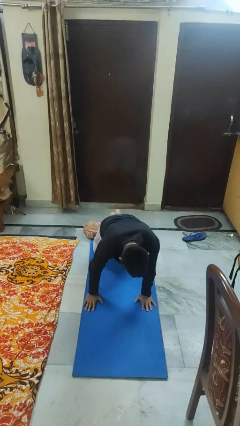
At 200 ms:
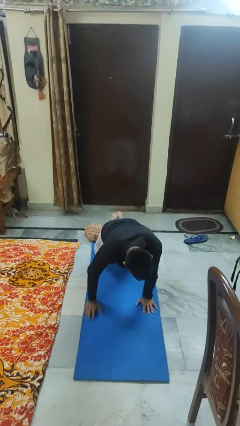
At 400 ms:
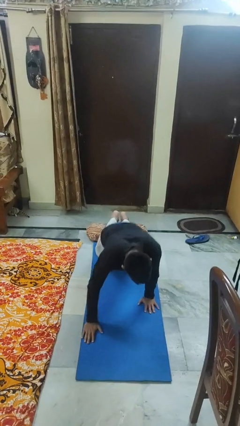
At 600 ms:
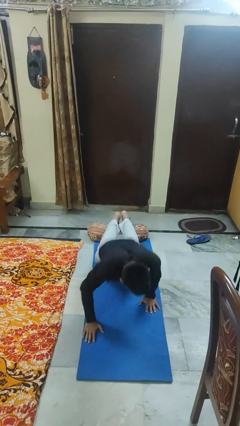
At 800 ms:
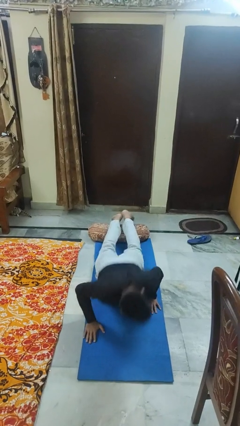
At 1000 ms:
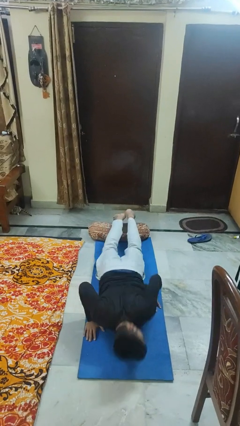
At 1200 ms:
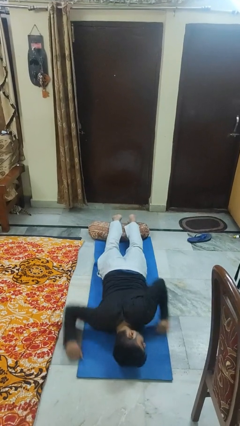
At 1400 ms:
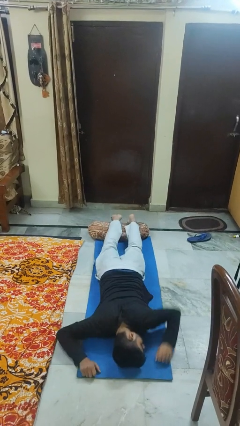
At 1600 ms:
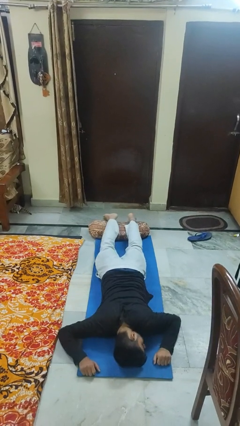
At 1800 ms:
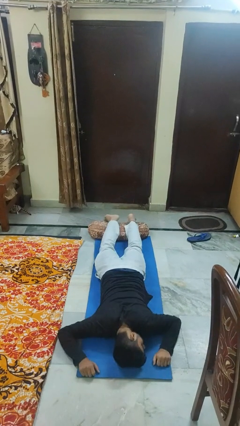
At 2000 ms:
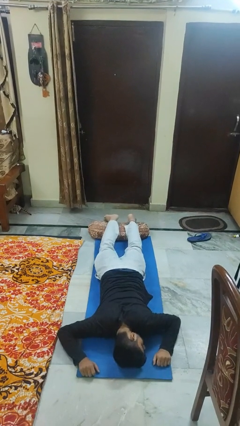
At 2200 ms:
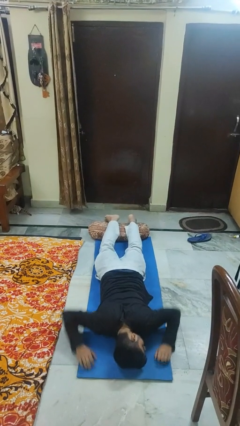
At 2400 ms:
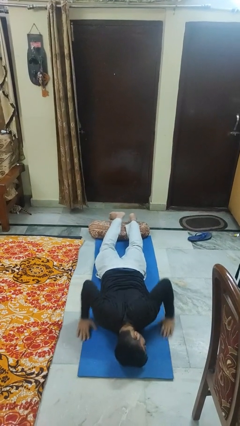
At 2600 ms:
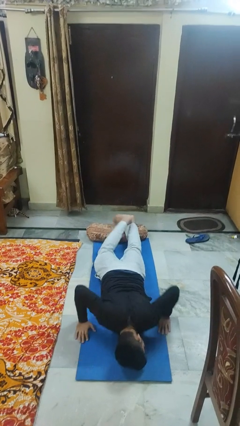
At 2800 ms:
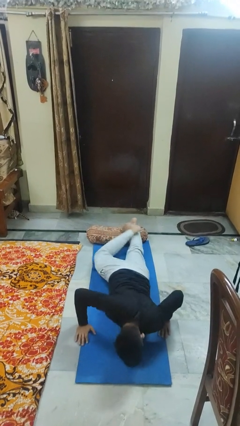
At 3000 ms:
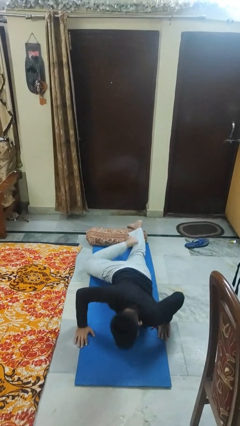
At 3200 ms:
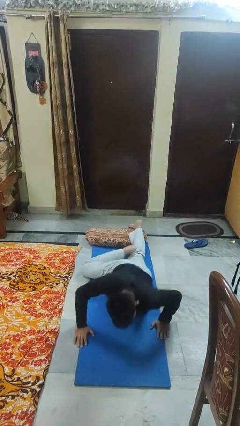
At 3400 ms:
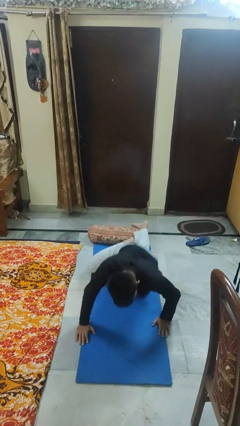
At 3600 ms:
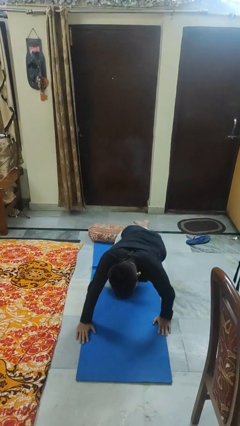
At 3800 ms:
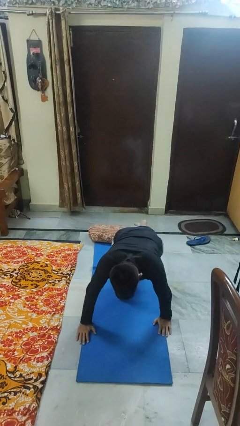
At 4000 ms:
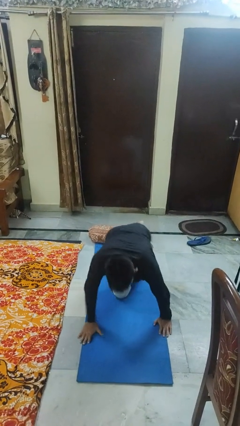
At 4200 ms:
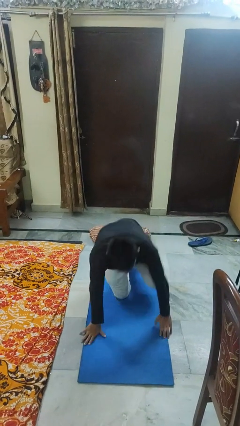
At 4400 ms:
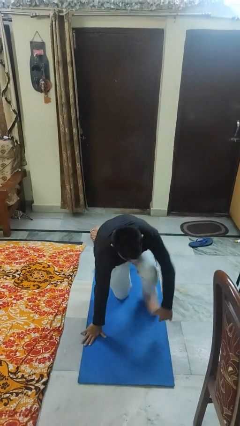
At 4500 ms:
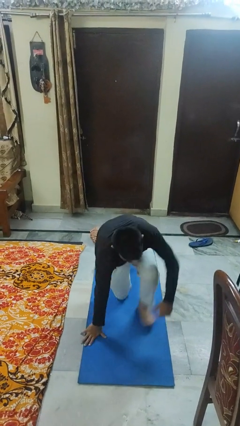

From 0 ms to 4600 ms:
person lies down on floor

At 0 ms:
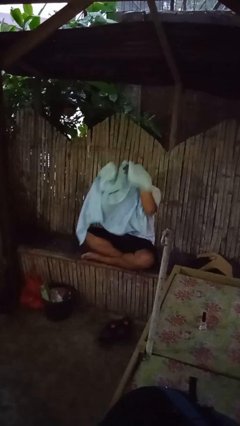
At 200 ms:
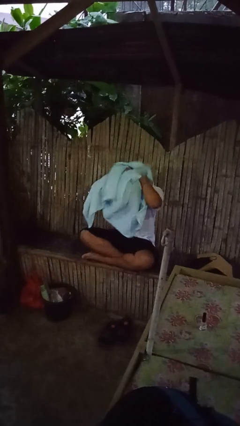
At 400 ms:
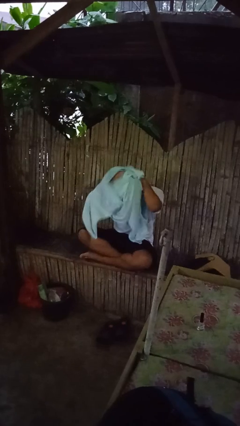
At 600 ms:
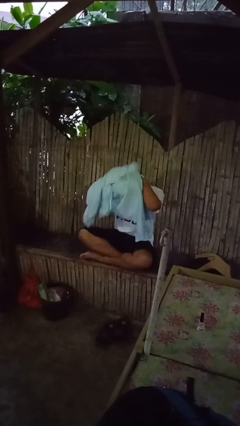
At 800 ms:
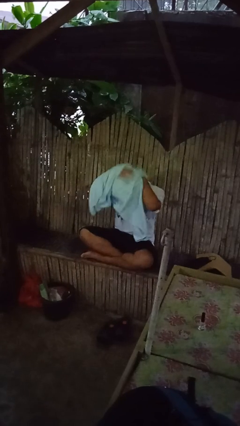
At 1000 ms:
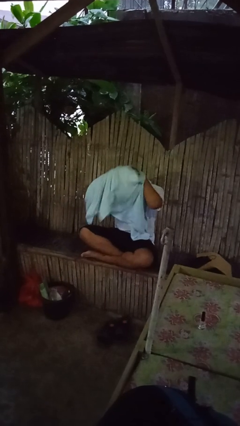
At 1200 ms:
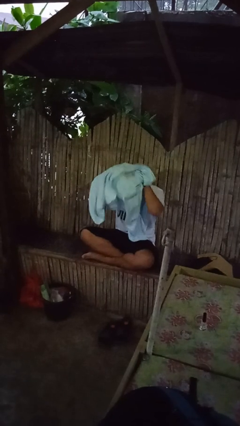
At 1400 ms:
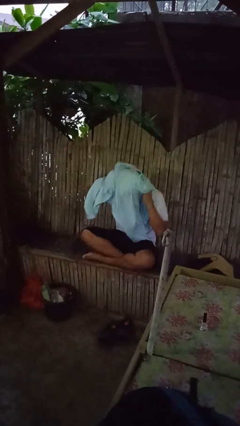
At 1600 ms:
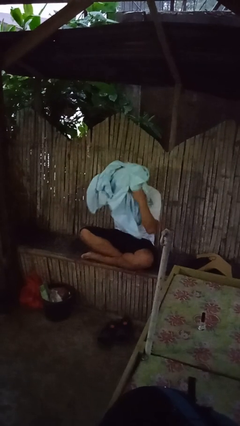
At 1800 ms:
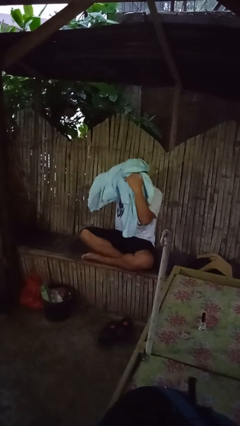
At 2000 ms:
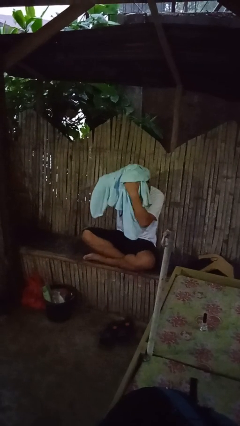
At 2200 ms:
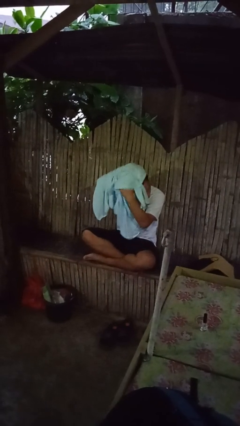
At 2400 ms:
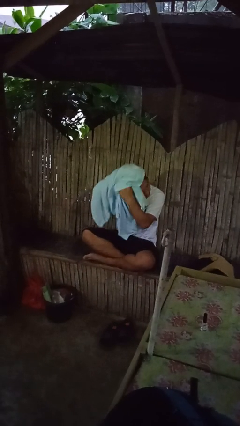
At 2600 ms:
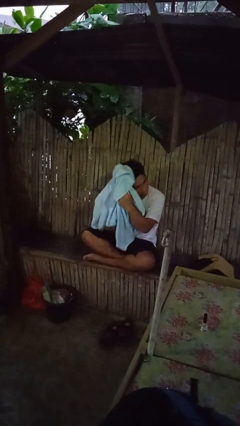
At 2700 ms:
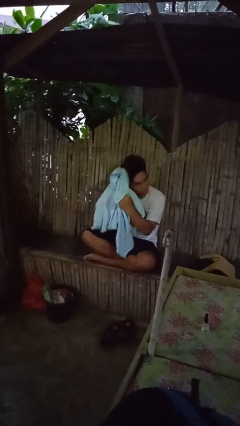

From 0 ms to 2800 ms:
person dries hair with towel

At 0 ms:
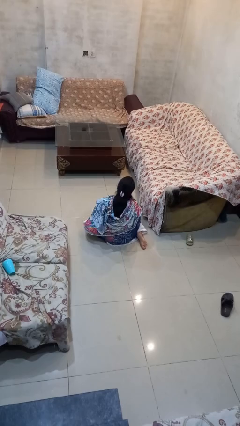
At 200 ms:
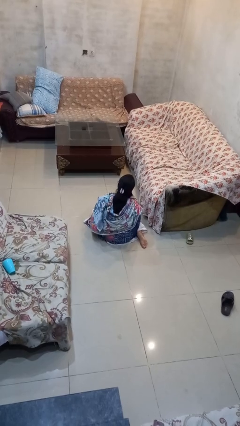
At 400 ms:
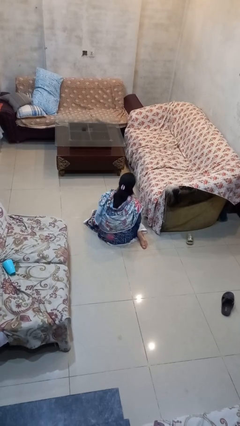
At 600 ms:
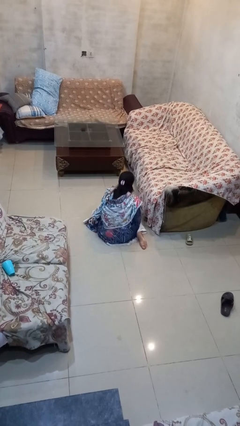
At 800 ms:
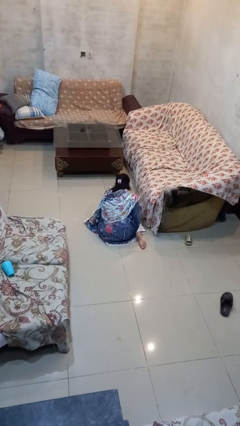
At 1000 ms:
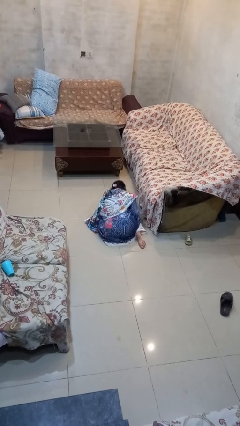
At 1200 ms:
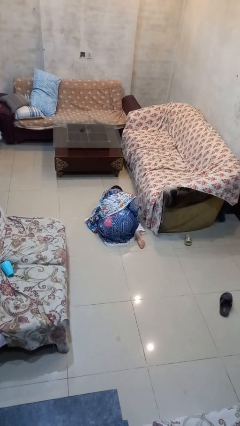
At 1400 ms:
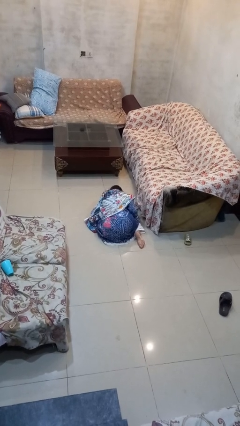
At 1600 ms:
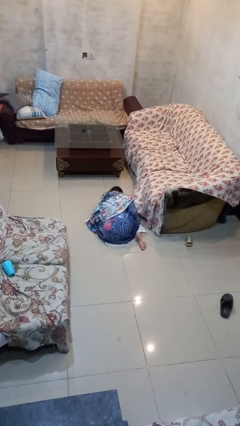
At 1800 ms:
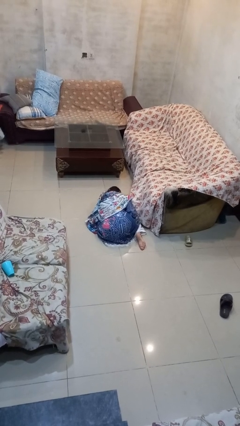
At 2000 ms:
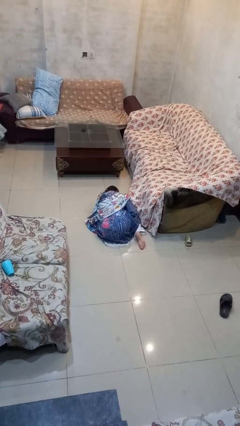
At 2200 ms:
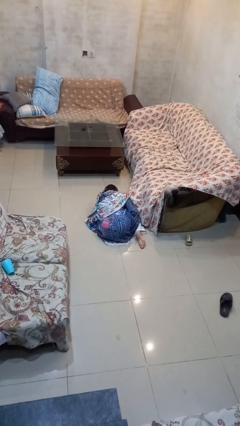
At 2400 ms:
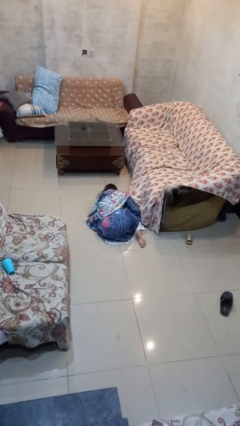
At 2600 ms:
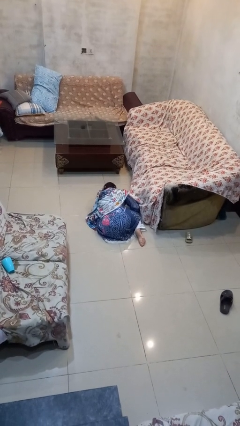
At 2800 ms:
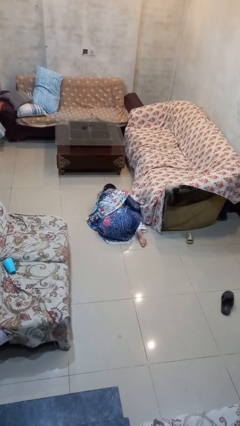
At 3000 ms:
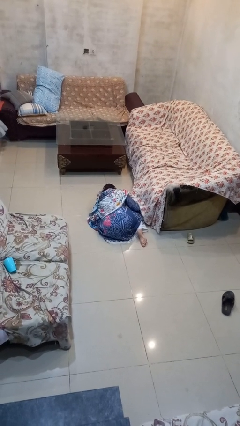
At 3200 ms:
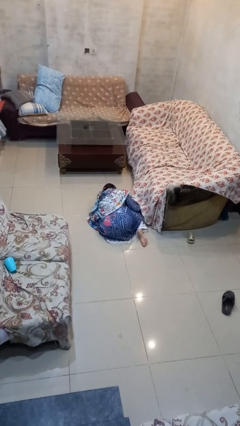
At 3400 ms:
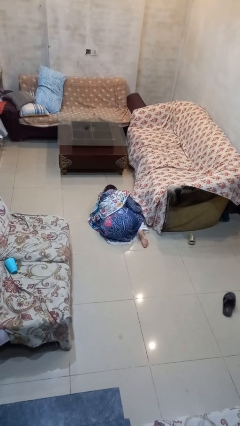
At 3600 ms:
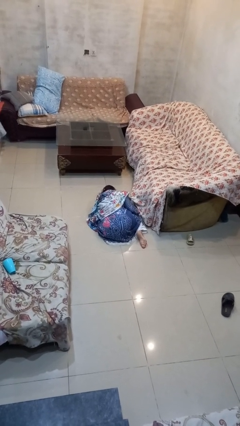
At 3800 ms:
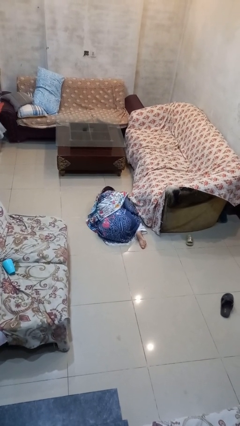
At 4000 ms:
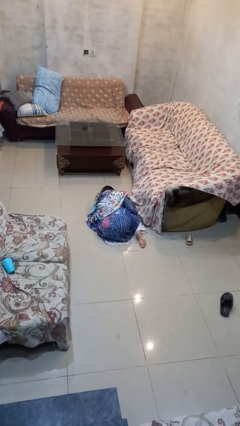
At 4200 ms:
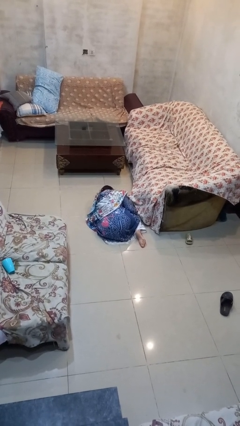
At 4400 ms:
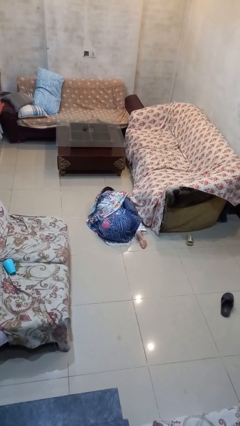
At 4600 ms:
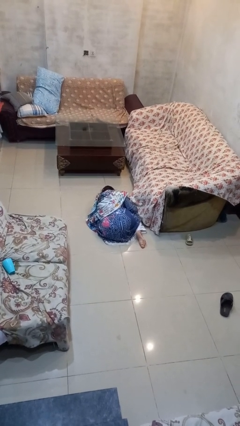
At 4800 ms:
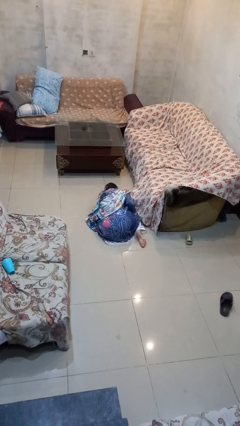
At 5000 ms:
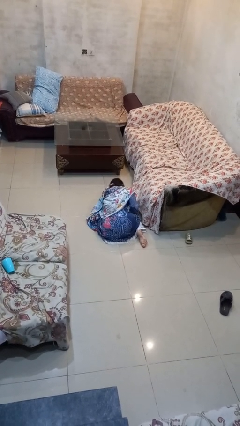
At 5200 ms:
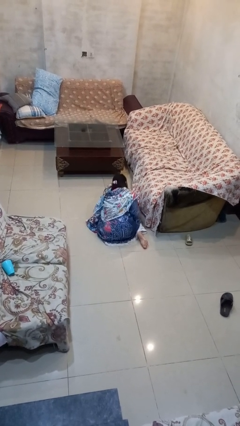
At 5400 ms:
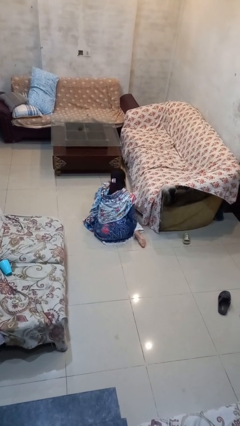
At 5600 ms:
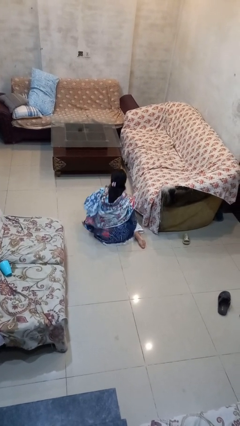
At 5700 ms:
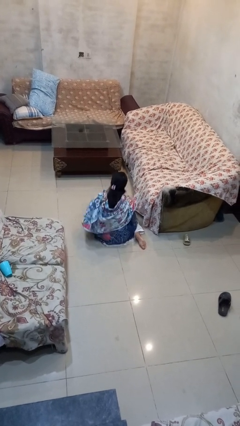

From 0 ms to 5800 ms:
person searches under couch

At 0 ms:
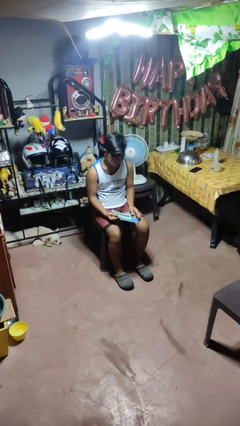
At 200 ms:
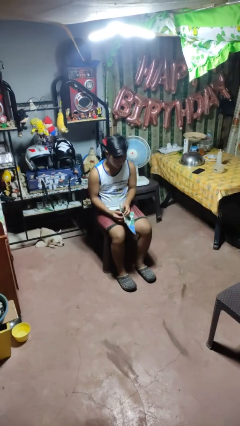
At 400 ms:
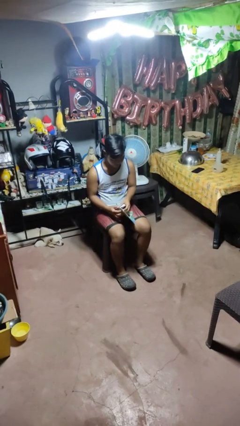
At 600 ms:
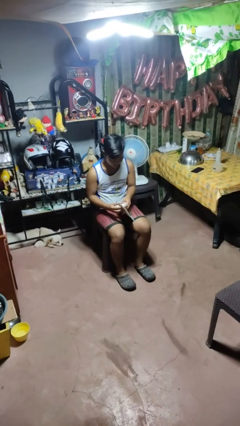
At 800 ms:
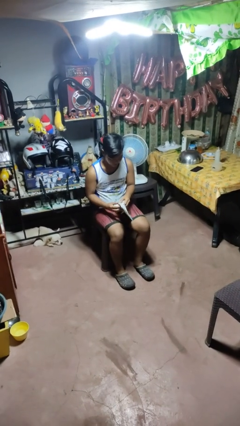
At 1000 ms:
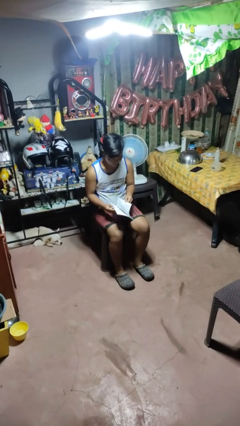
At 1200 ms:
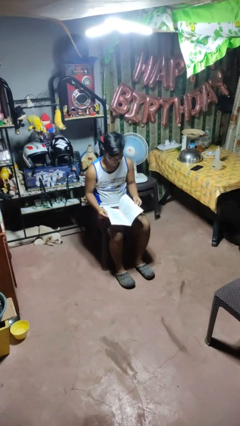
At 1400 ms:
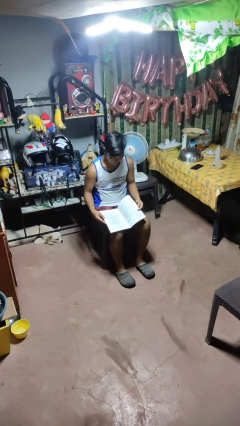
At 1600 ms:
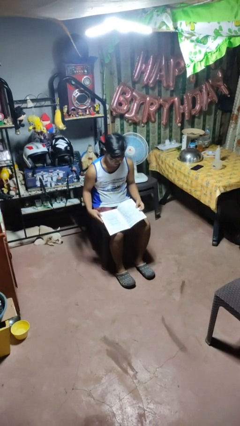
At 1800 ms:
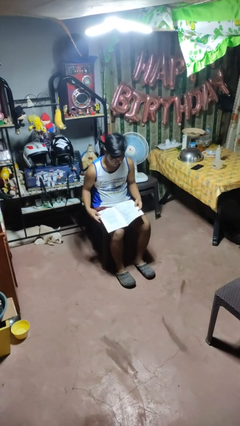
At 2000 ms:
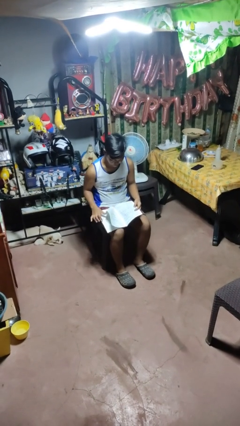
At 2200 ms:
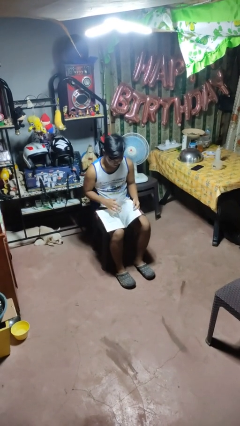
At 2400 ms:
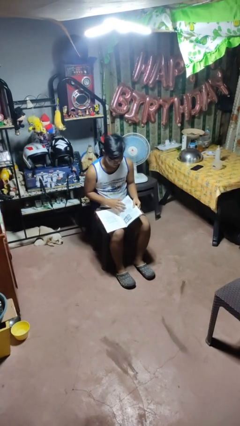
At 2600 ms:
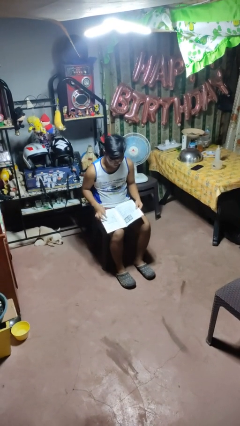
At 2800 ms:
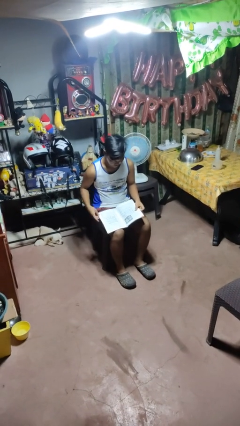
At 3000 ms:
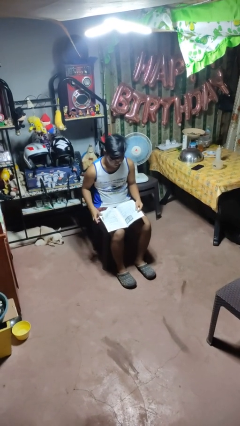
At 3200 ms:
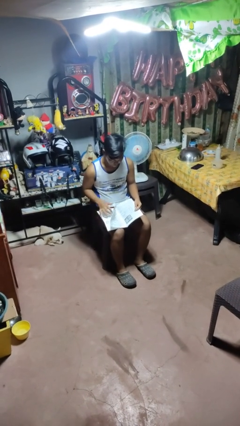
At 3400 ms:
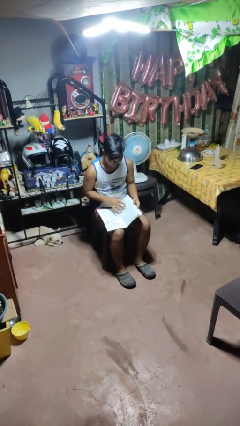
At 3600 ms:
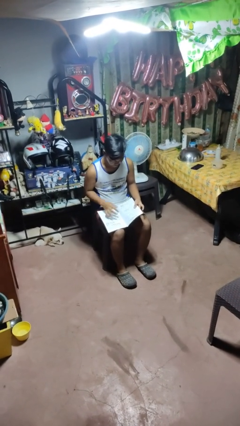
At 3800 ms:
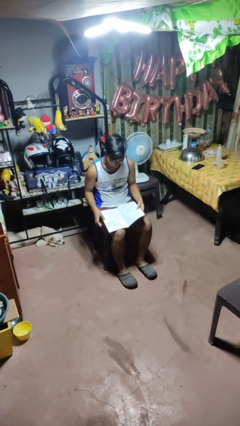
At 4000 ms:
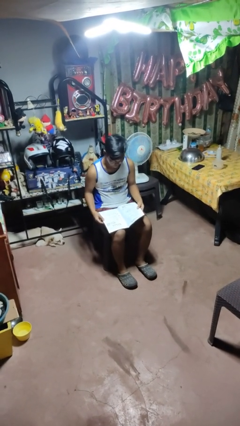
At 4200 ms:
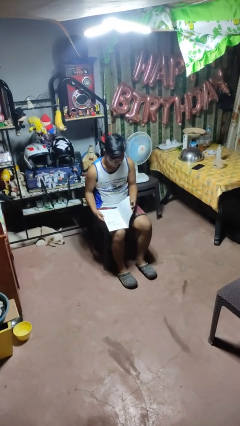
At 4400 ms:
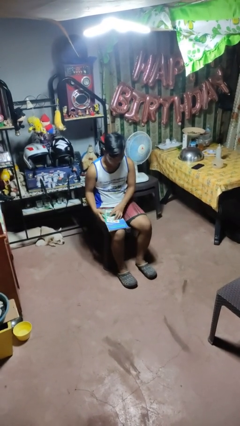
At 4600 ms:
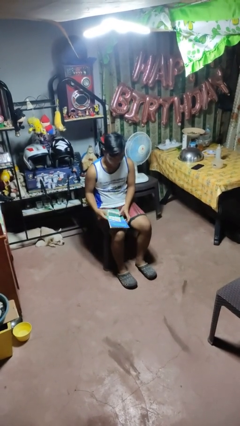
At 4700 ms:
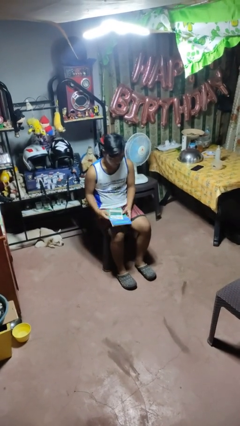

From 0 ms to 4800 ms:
person reads magazine
